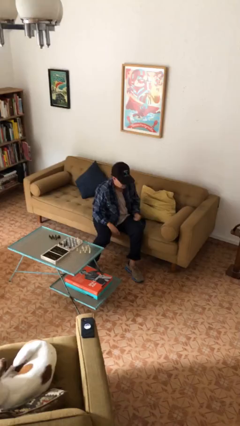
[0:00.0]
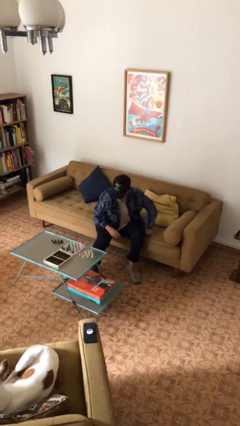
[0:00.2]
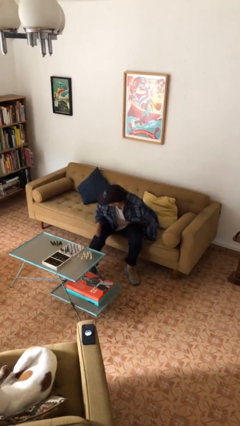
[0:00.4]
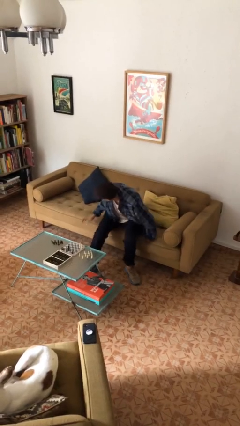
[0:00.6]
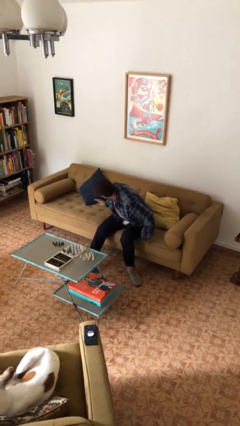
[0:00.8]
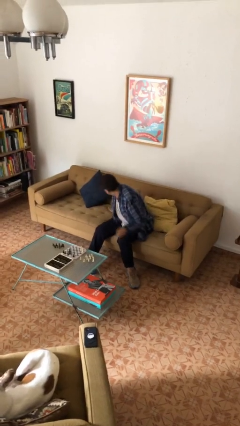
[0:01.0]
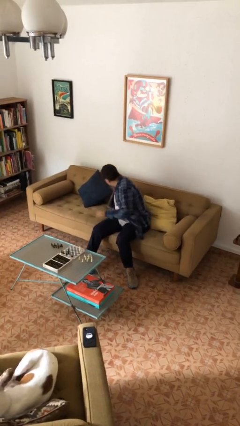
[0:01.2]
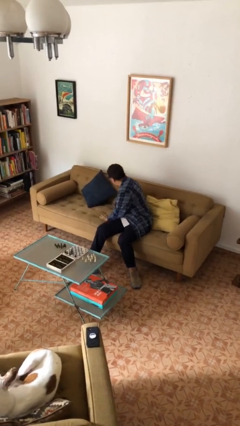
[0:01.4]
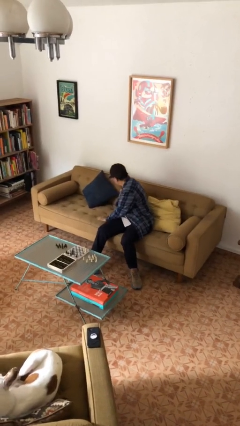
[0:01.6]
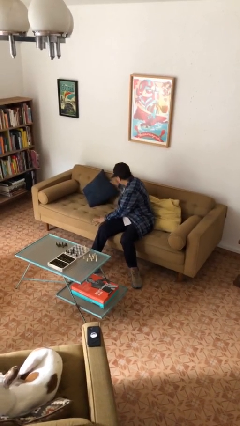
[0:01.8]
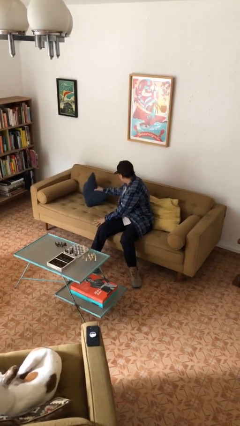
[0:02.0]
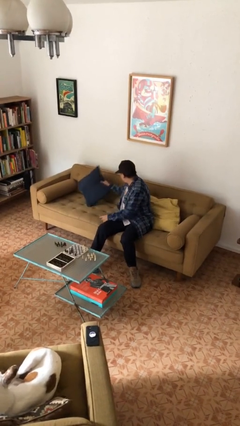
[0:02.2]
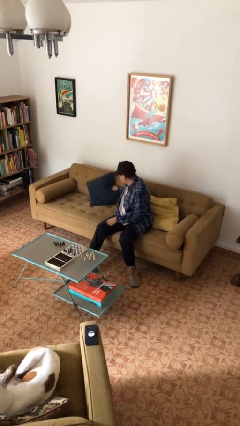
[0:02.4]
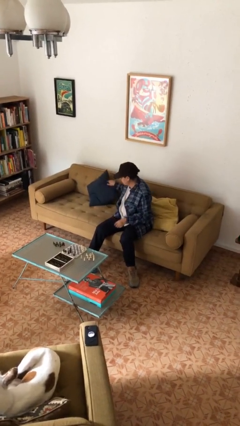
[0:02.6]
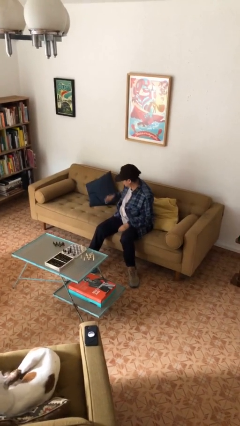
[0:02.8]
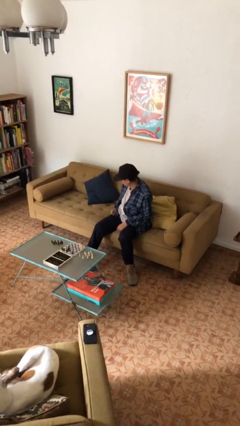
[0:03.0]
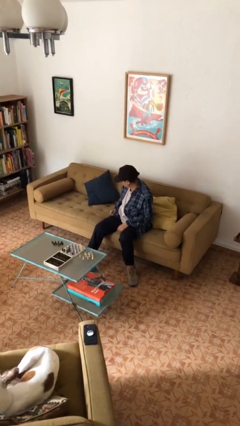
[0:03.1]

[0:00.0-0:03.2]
person searches in couch

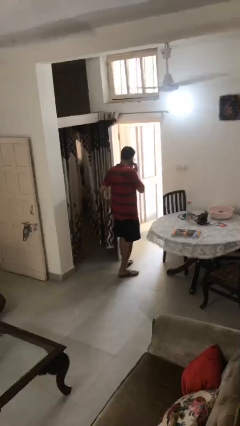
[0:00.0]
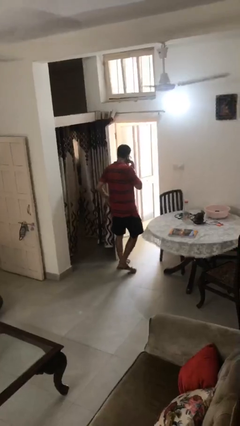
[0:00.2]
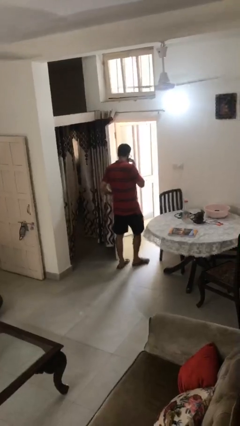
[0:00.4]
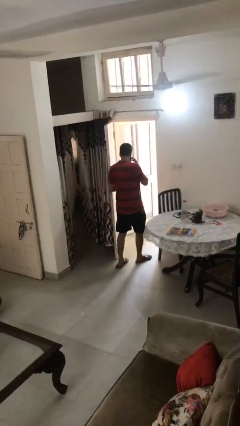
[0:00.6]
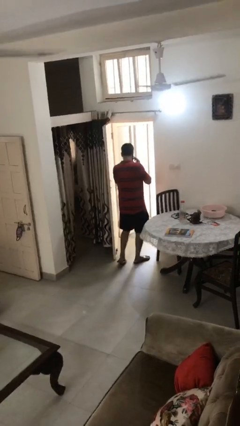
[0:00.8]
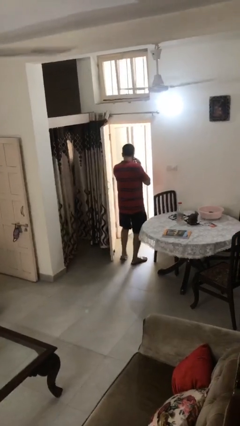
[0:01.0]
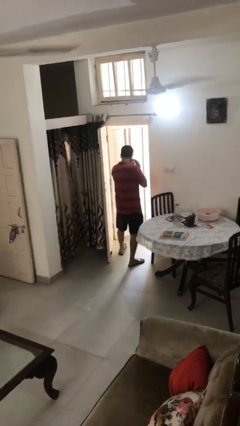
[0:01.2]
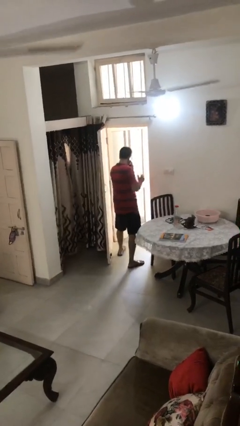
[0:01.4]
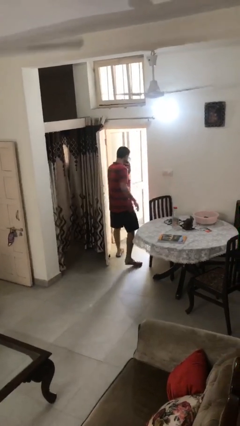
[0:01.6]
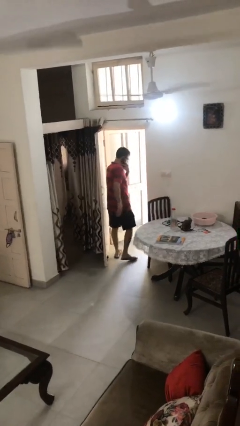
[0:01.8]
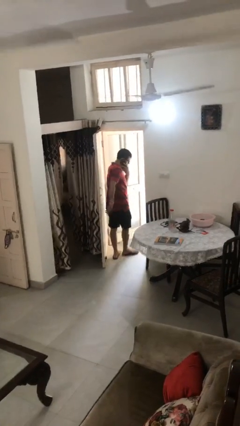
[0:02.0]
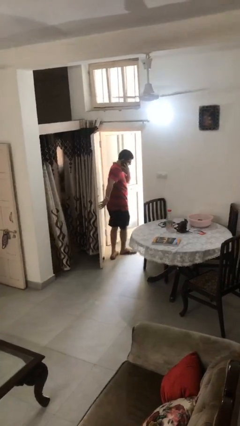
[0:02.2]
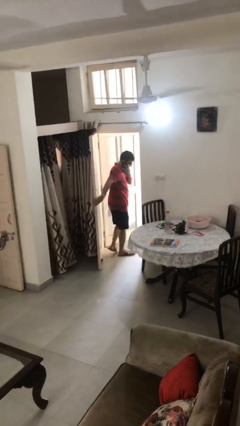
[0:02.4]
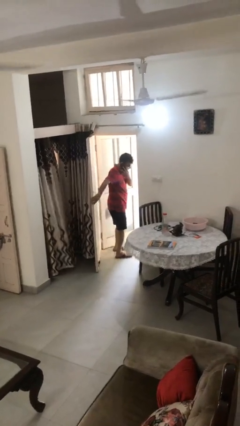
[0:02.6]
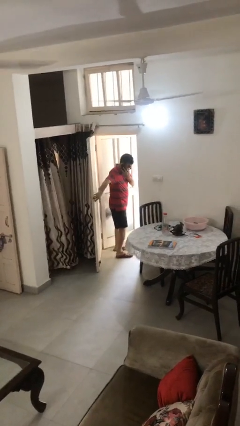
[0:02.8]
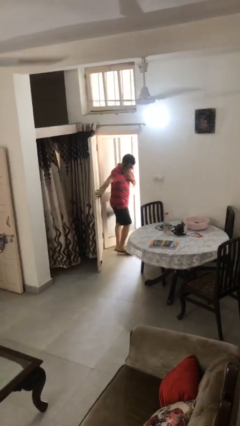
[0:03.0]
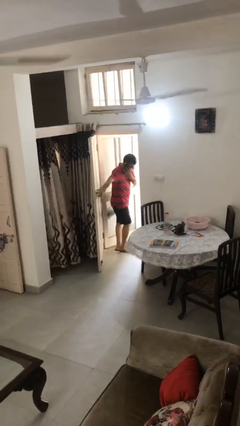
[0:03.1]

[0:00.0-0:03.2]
person exits scene through structure

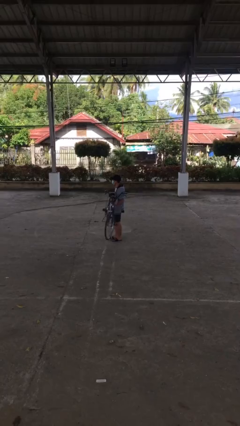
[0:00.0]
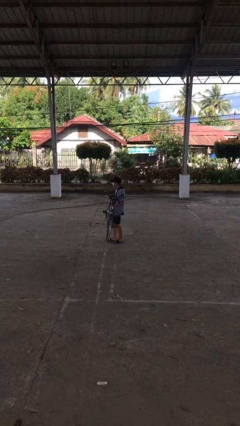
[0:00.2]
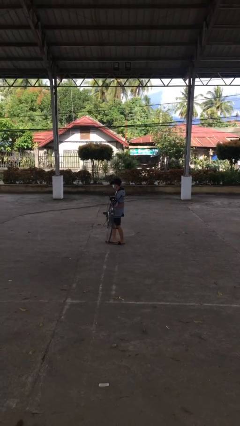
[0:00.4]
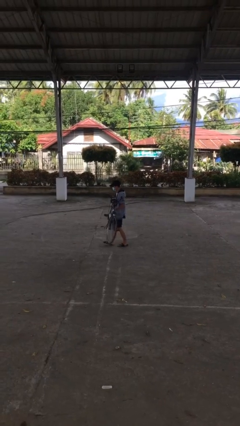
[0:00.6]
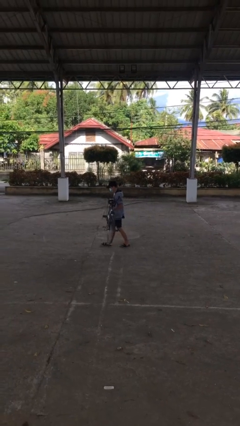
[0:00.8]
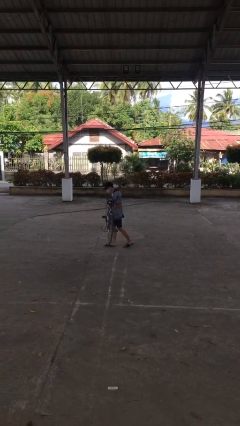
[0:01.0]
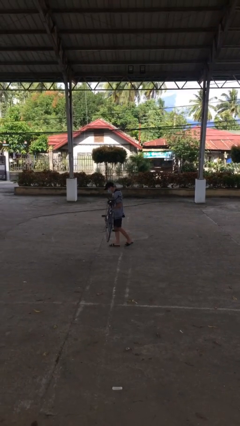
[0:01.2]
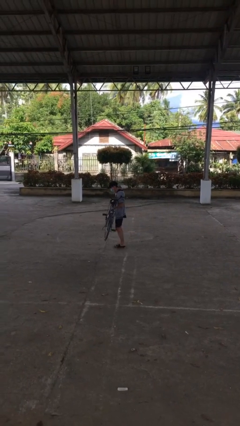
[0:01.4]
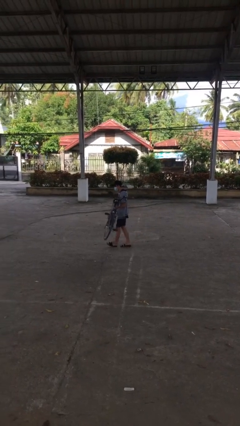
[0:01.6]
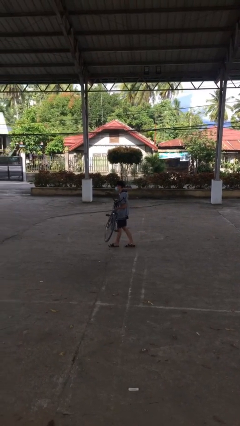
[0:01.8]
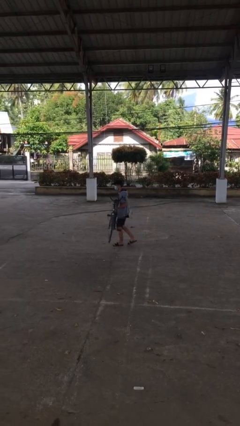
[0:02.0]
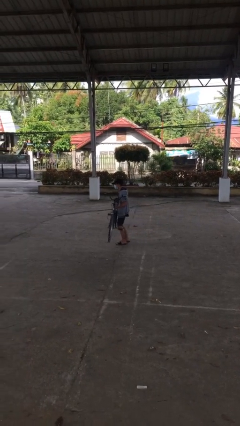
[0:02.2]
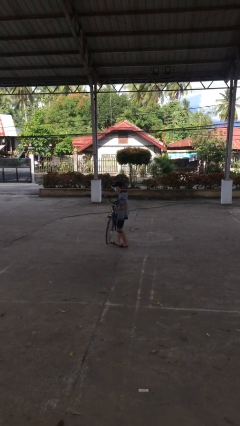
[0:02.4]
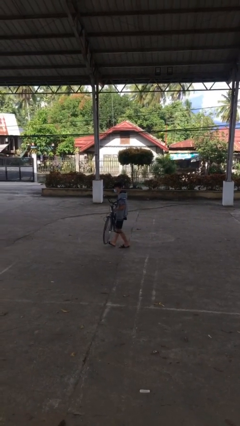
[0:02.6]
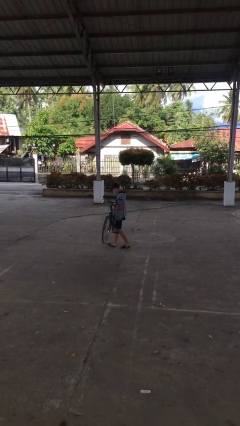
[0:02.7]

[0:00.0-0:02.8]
person carries heavy object

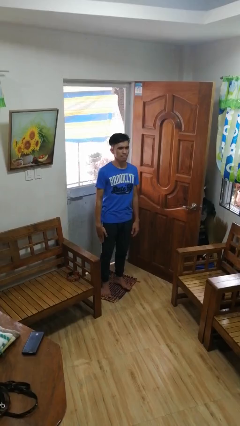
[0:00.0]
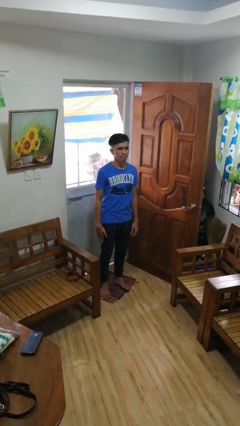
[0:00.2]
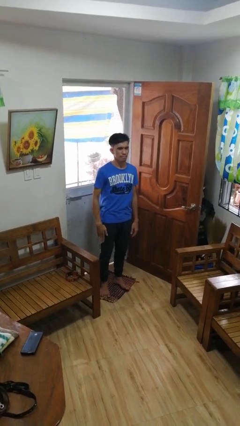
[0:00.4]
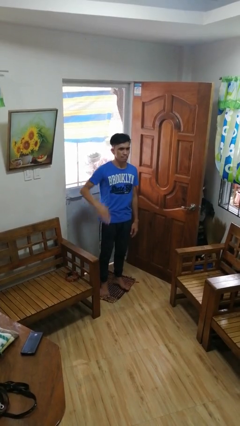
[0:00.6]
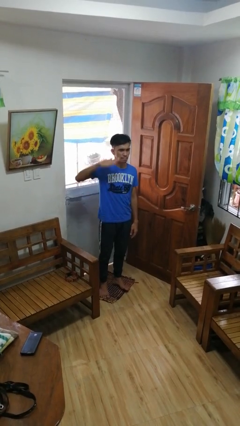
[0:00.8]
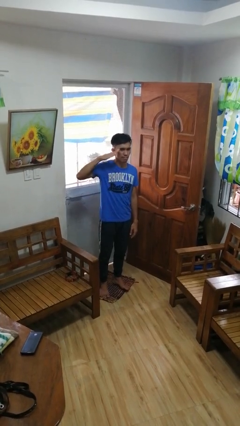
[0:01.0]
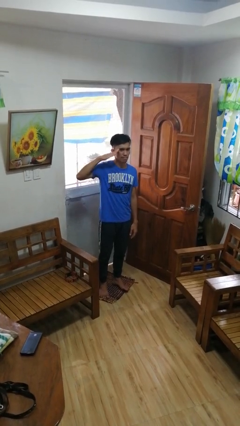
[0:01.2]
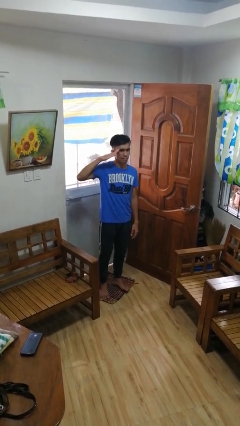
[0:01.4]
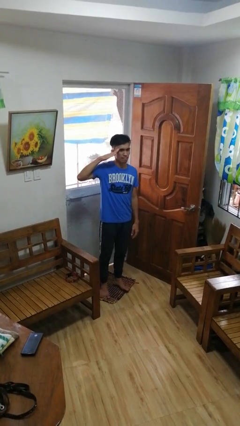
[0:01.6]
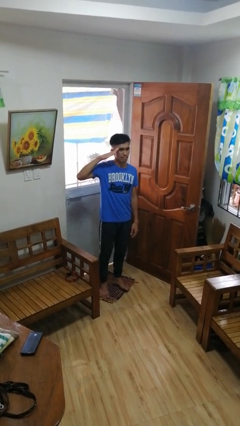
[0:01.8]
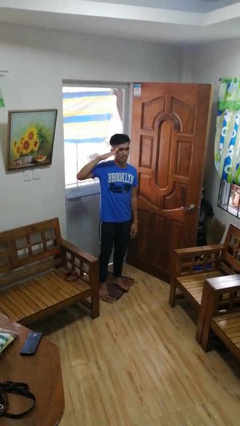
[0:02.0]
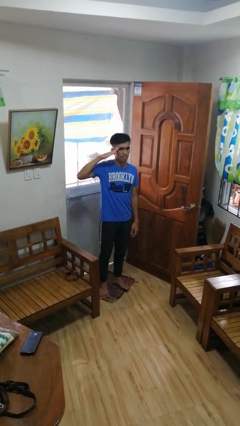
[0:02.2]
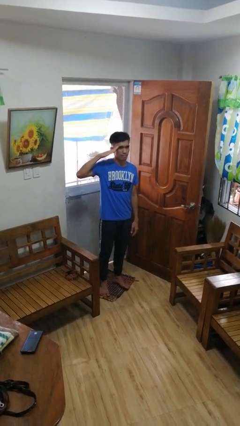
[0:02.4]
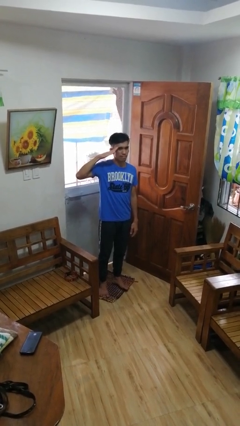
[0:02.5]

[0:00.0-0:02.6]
person salutes

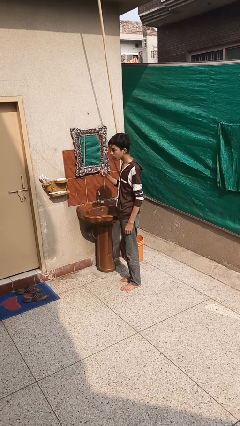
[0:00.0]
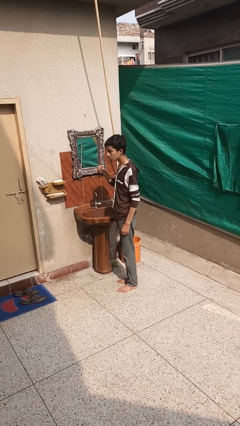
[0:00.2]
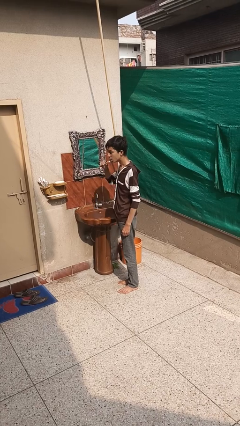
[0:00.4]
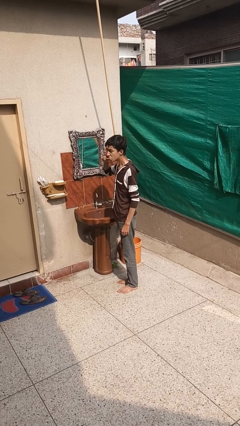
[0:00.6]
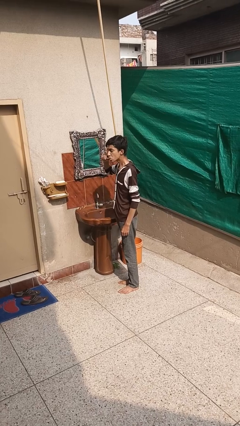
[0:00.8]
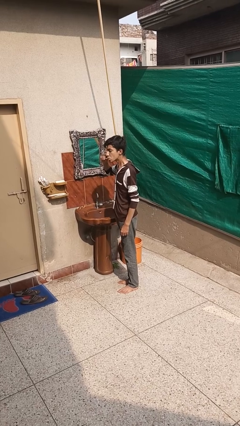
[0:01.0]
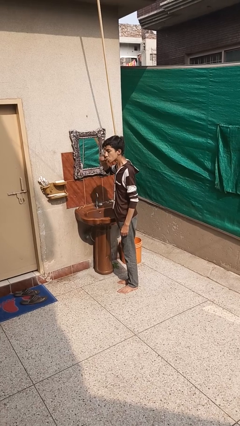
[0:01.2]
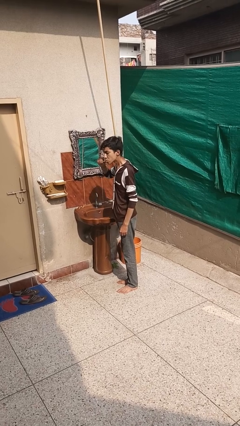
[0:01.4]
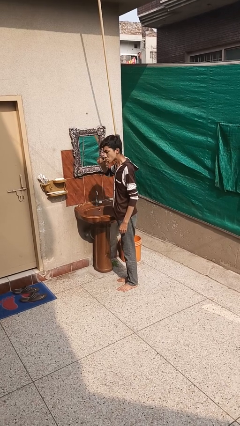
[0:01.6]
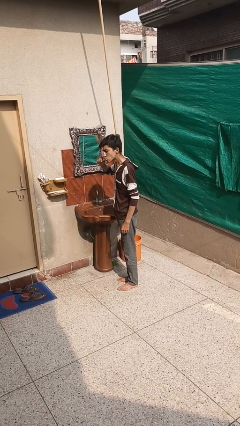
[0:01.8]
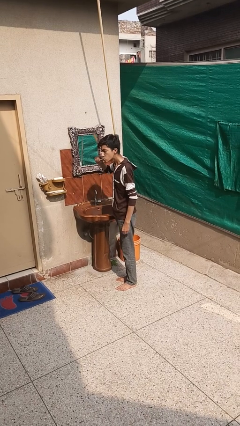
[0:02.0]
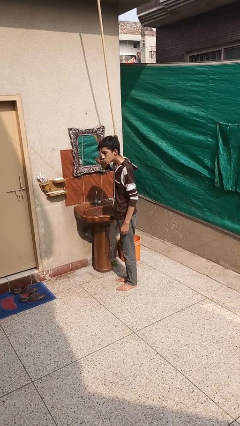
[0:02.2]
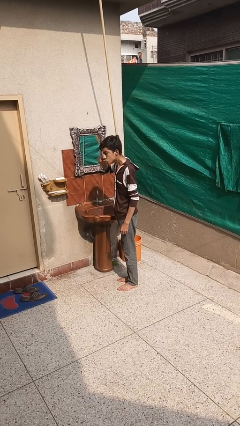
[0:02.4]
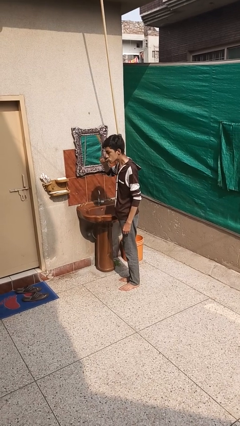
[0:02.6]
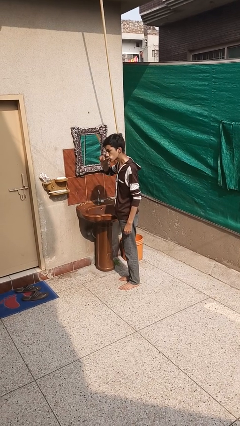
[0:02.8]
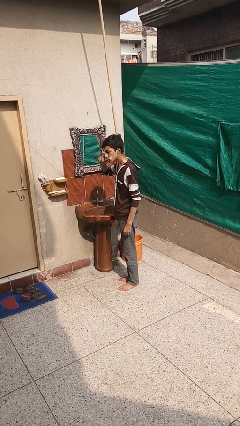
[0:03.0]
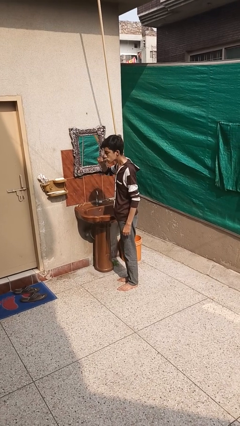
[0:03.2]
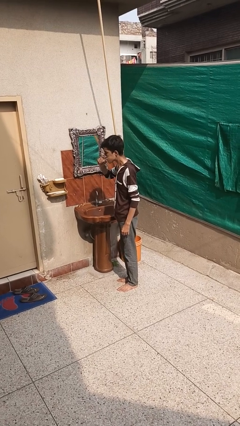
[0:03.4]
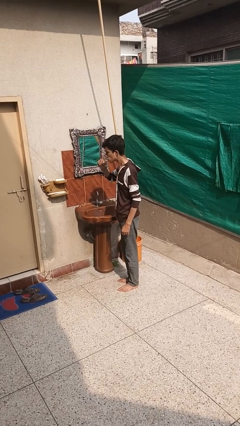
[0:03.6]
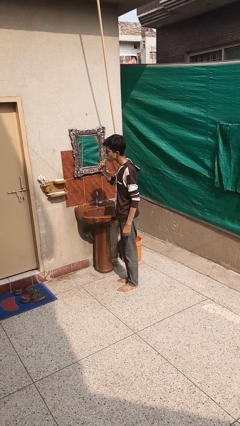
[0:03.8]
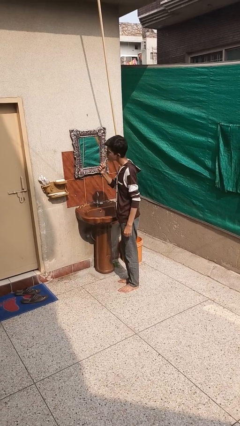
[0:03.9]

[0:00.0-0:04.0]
person brushes teeth

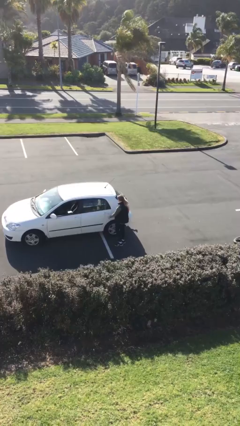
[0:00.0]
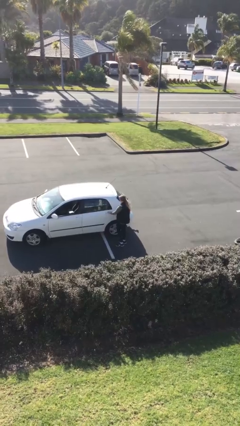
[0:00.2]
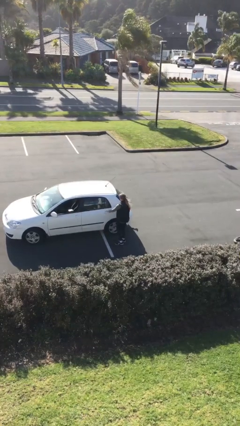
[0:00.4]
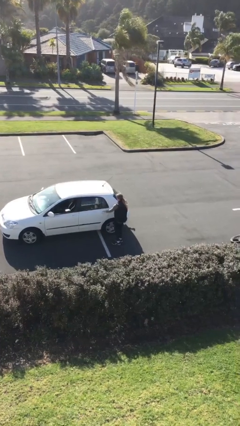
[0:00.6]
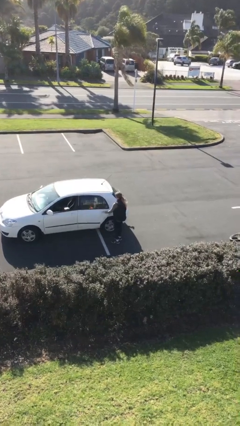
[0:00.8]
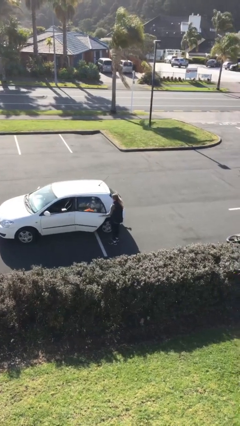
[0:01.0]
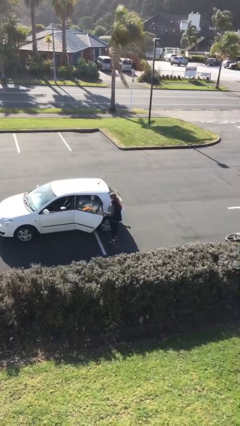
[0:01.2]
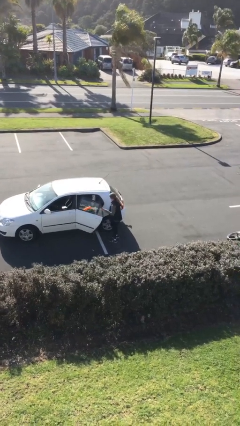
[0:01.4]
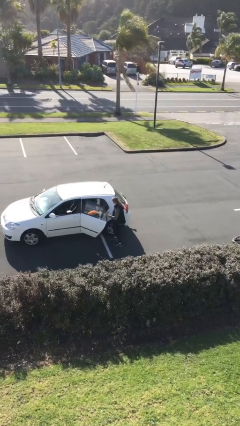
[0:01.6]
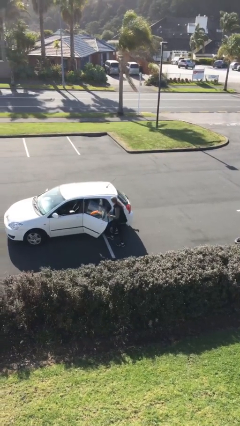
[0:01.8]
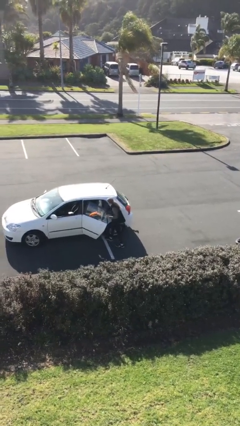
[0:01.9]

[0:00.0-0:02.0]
person opens car door
